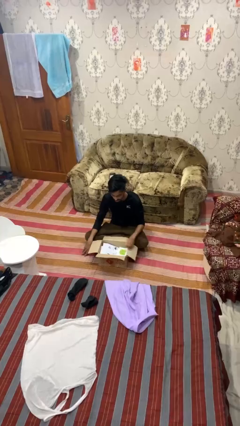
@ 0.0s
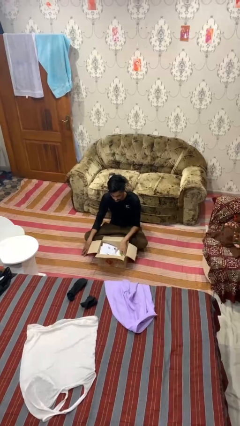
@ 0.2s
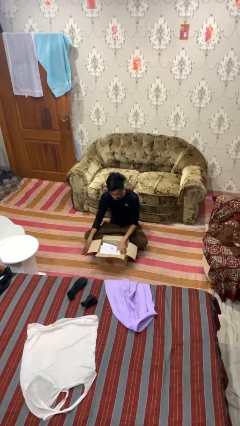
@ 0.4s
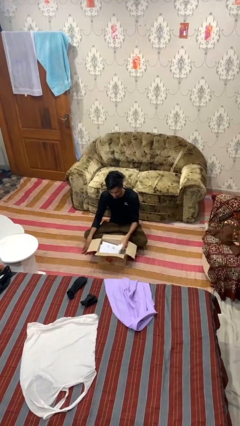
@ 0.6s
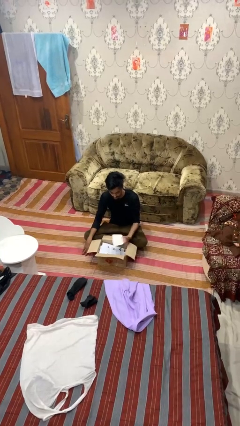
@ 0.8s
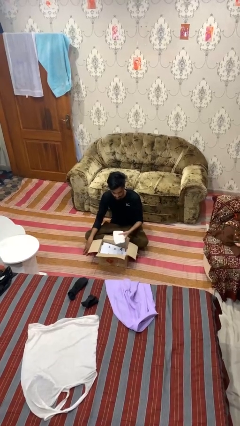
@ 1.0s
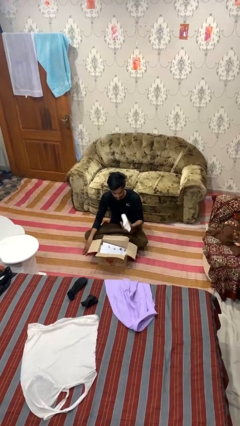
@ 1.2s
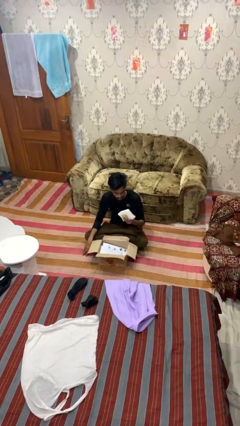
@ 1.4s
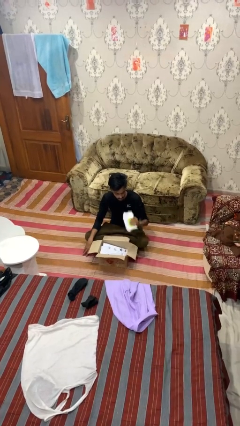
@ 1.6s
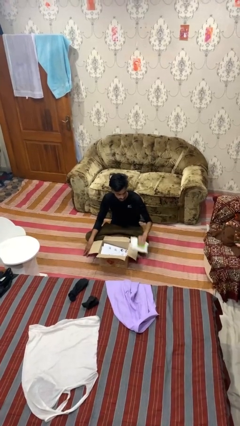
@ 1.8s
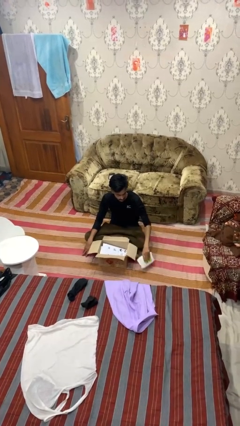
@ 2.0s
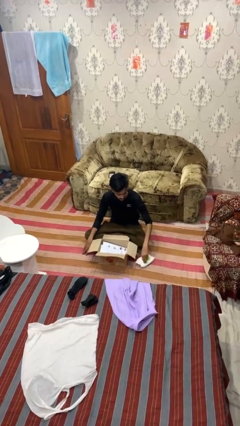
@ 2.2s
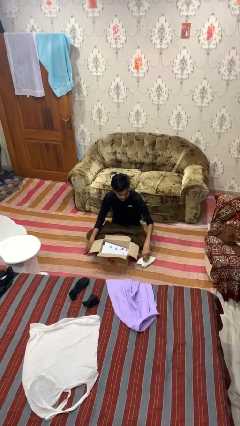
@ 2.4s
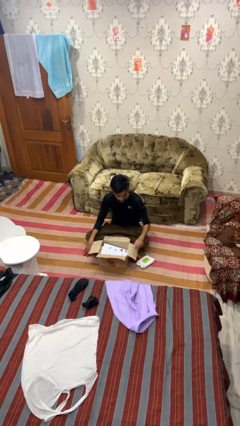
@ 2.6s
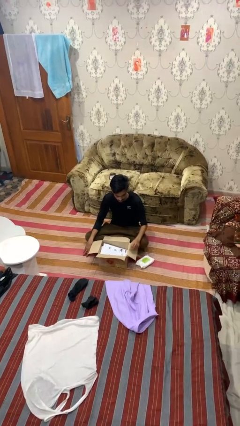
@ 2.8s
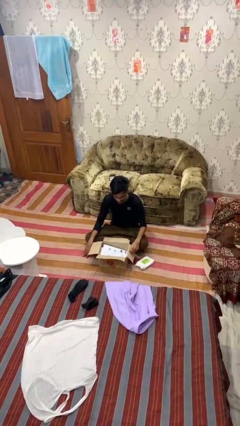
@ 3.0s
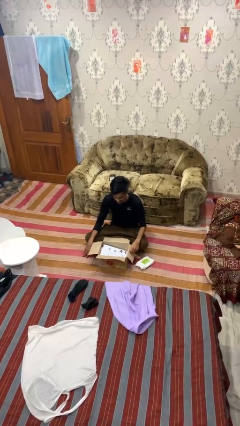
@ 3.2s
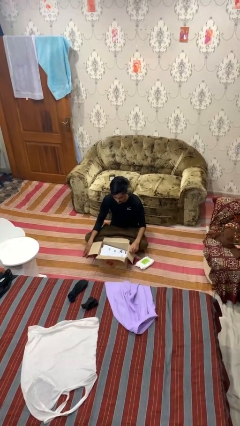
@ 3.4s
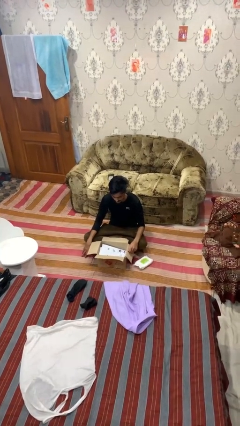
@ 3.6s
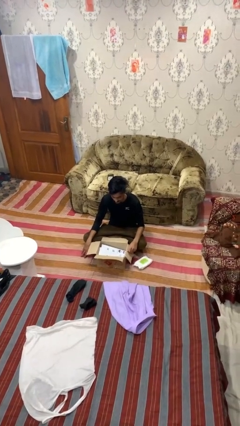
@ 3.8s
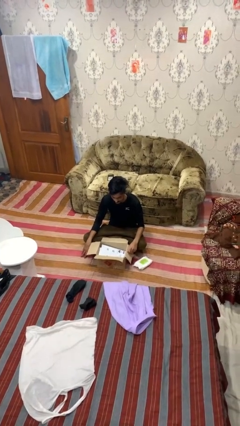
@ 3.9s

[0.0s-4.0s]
person takes object from box

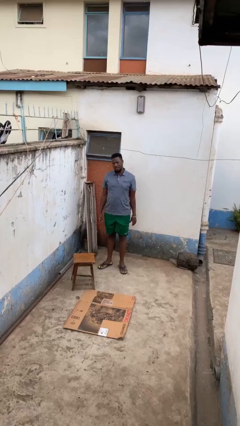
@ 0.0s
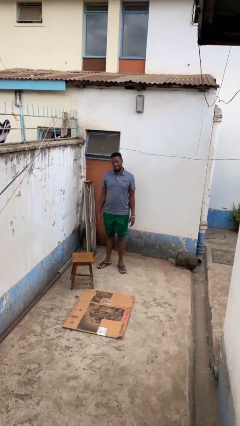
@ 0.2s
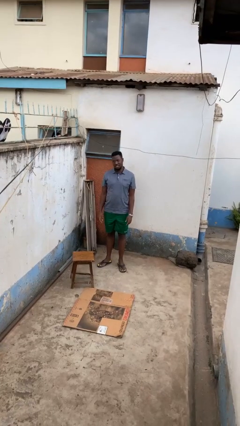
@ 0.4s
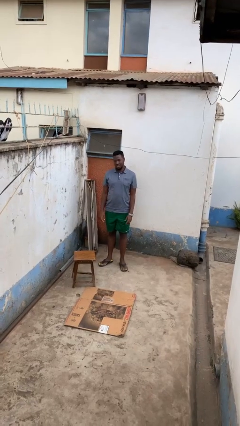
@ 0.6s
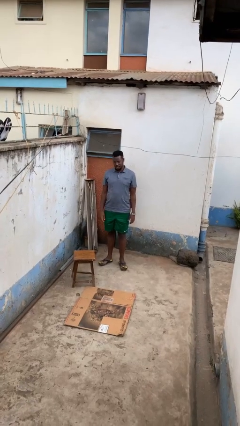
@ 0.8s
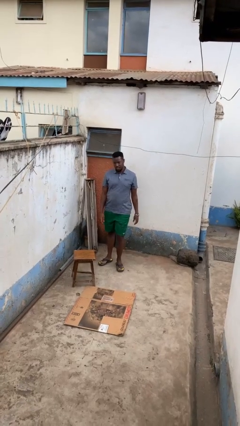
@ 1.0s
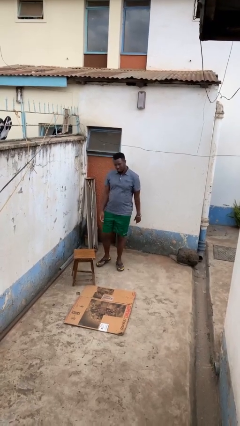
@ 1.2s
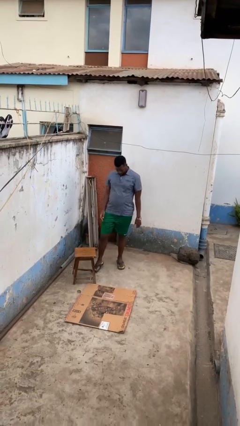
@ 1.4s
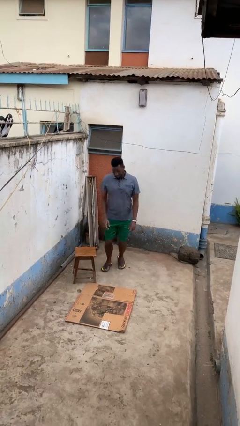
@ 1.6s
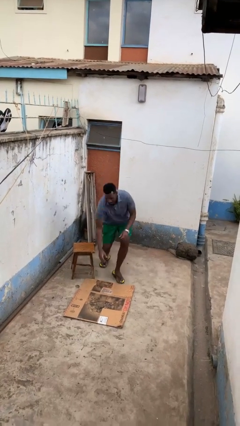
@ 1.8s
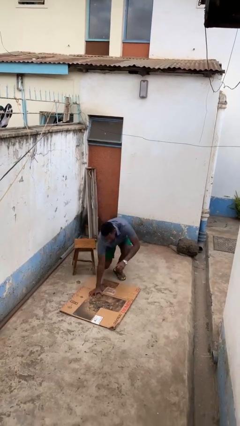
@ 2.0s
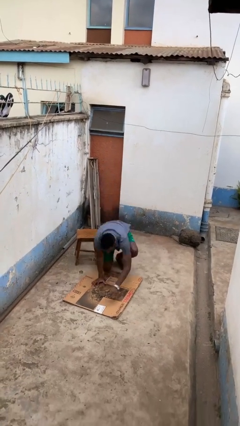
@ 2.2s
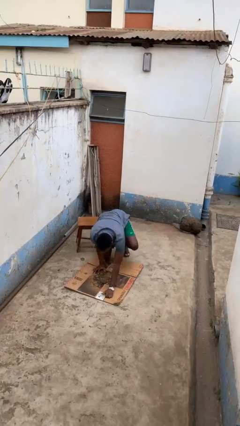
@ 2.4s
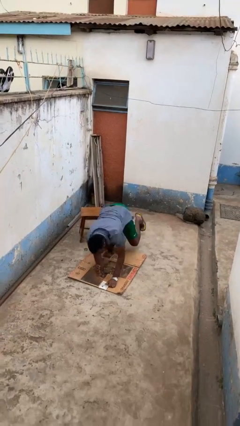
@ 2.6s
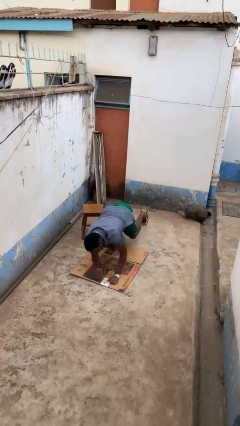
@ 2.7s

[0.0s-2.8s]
person trips on object on floor

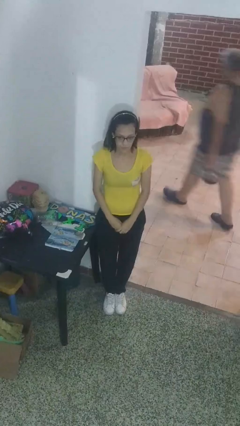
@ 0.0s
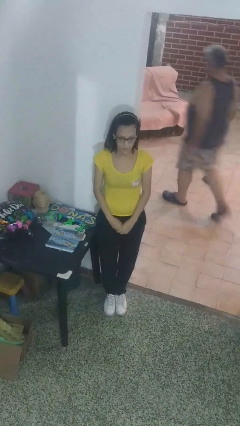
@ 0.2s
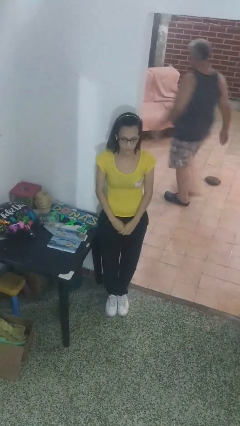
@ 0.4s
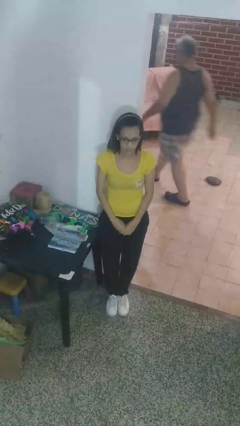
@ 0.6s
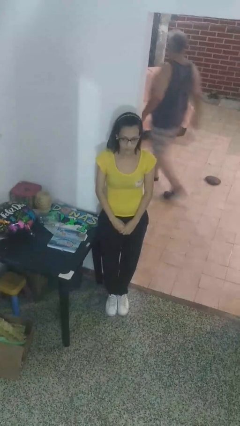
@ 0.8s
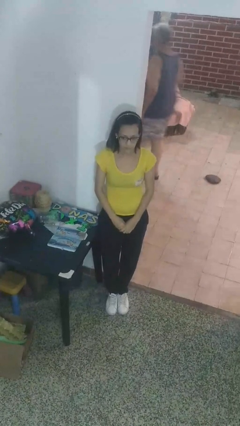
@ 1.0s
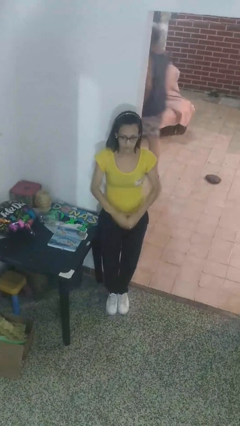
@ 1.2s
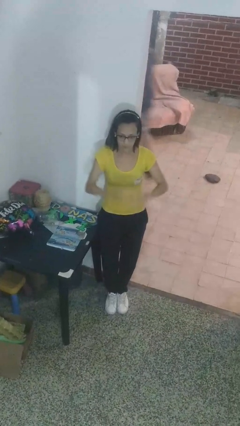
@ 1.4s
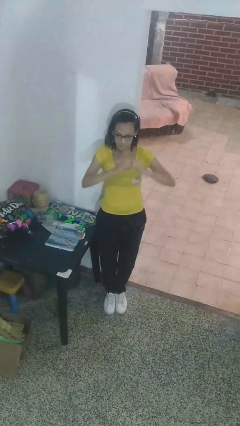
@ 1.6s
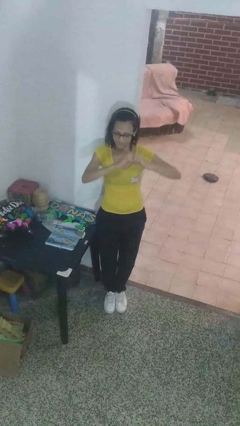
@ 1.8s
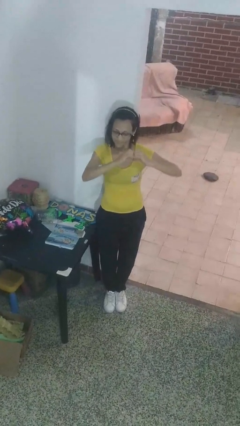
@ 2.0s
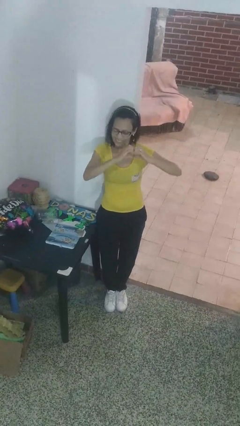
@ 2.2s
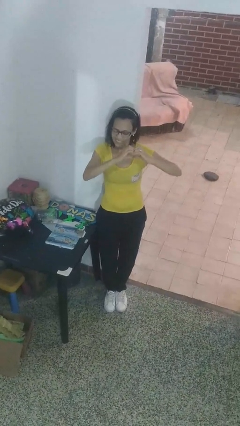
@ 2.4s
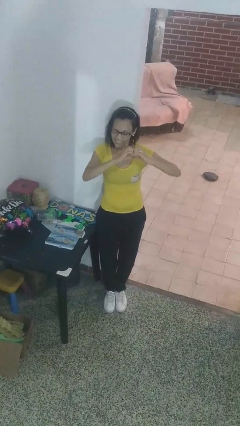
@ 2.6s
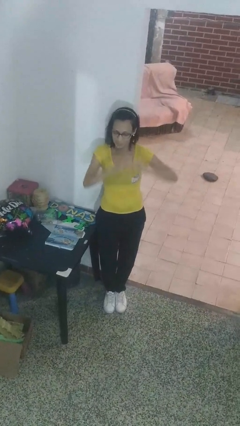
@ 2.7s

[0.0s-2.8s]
person gestures heart

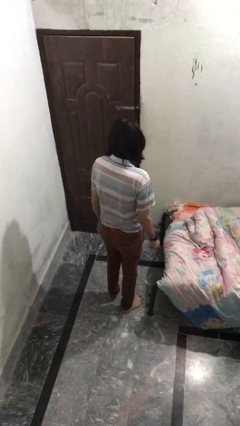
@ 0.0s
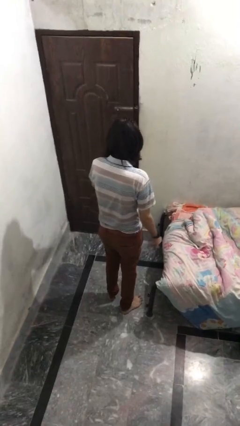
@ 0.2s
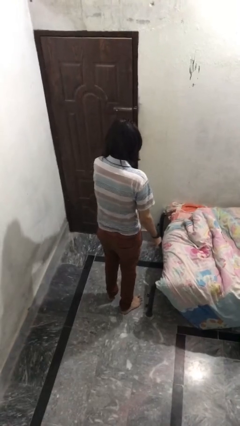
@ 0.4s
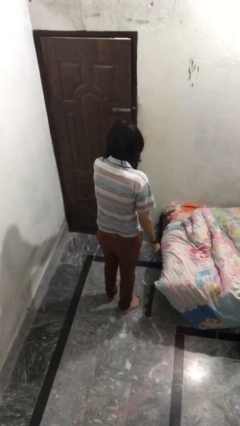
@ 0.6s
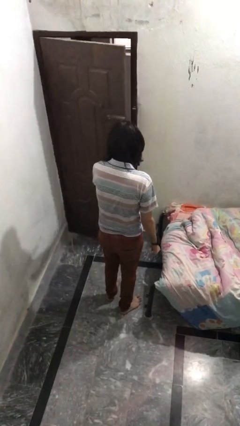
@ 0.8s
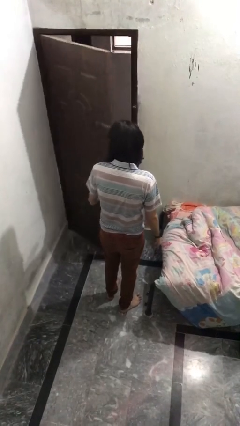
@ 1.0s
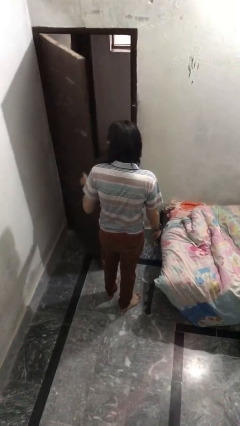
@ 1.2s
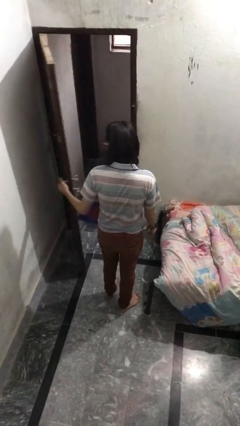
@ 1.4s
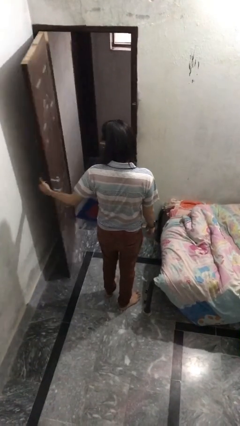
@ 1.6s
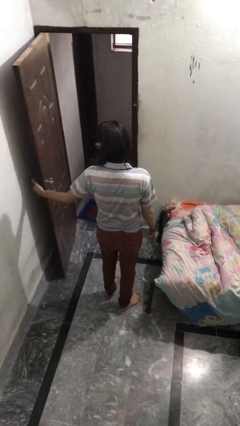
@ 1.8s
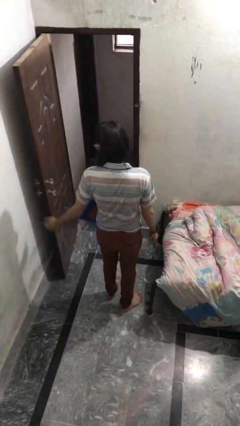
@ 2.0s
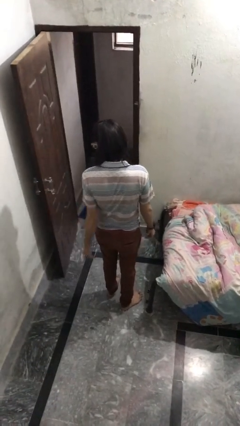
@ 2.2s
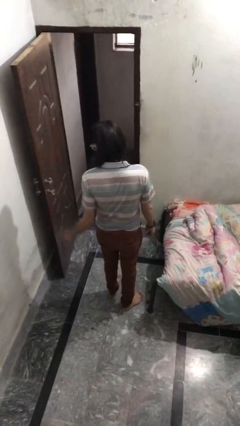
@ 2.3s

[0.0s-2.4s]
person opens facility door

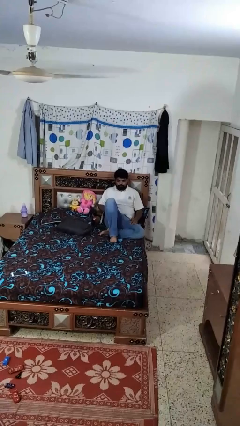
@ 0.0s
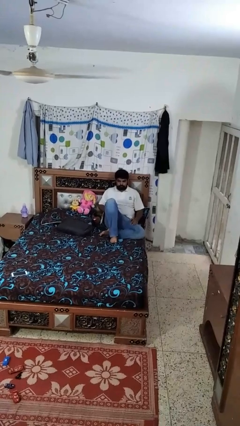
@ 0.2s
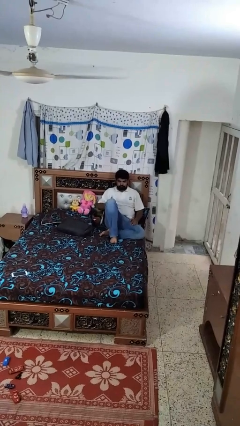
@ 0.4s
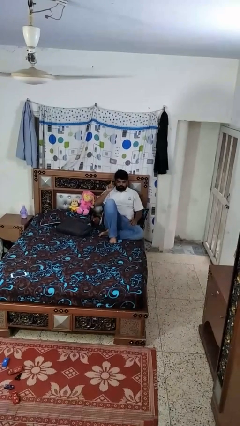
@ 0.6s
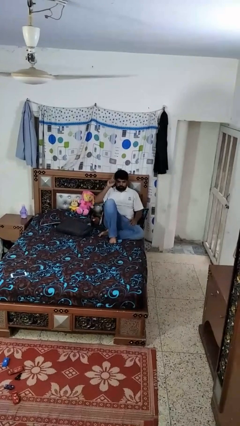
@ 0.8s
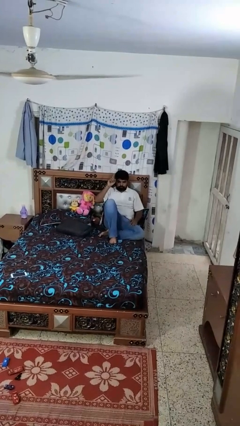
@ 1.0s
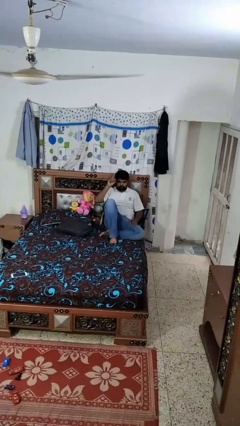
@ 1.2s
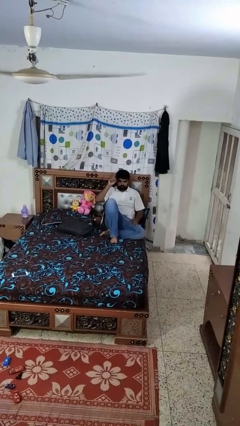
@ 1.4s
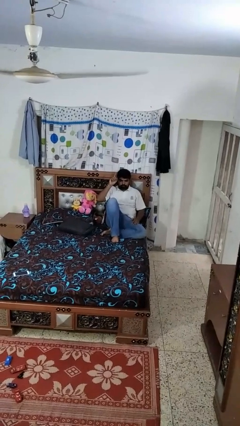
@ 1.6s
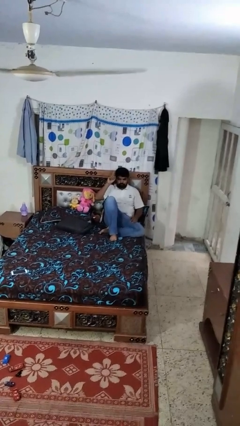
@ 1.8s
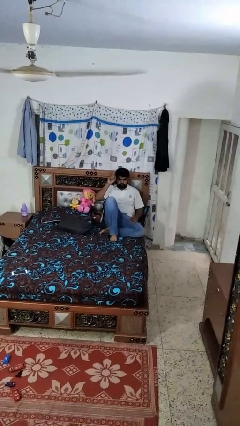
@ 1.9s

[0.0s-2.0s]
person gestures raise hand

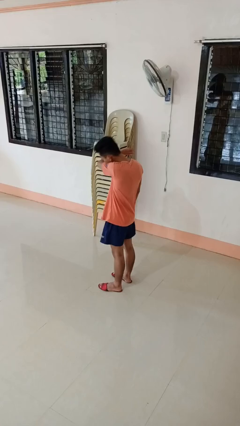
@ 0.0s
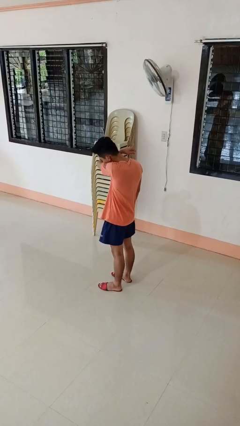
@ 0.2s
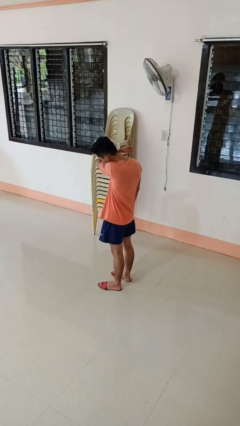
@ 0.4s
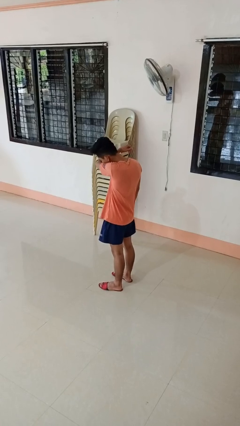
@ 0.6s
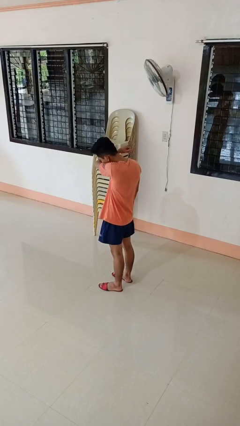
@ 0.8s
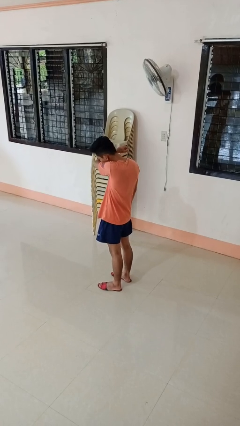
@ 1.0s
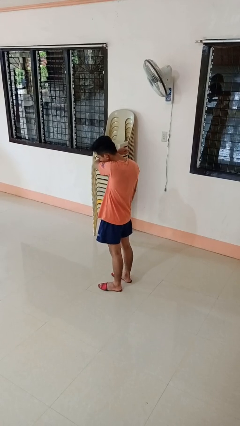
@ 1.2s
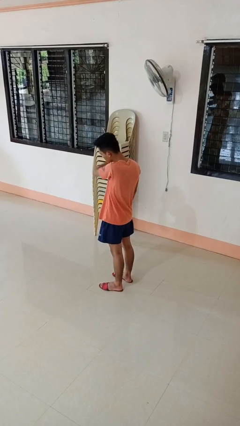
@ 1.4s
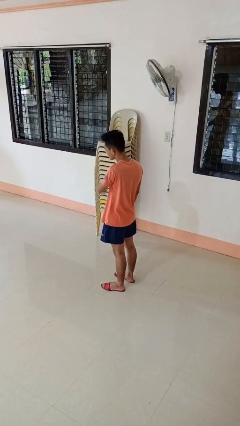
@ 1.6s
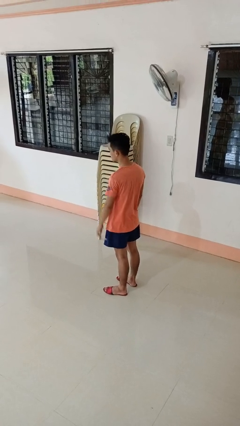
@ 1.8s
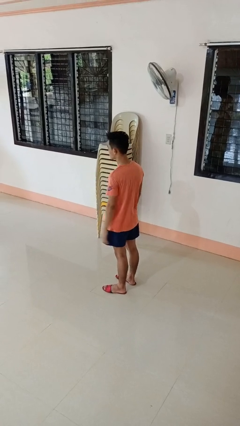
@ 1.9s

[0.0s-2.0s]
person sneezes into arm

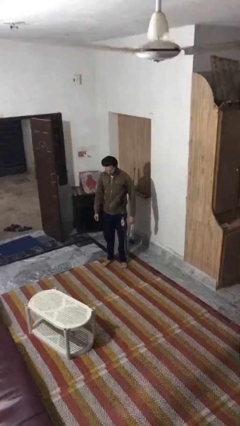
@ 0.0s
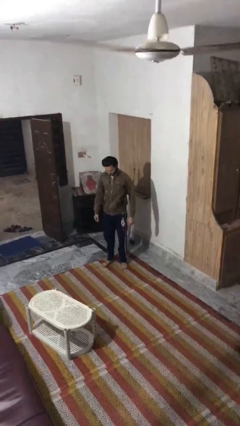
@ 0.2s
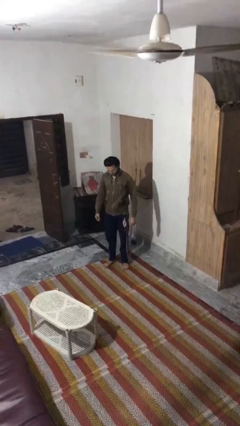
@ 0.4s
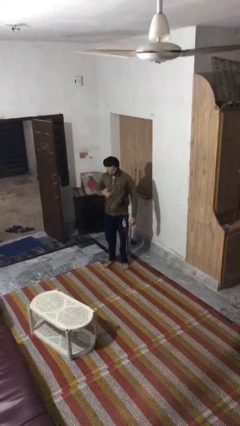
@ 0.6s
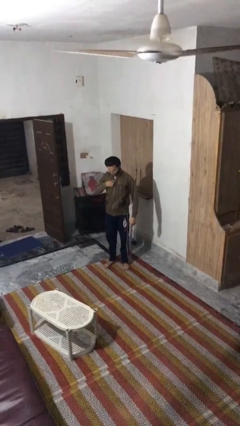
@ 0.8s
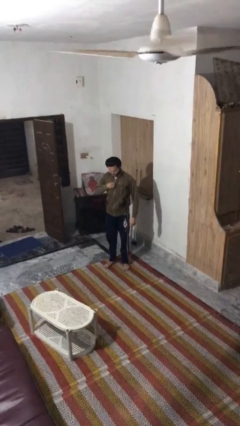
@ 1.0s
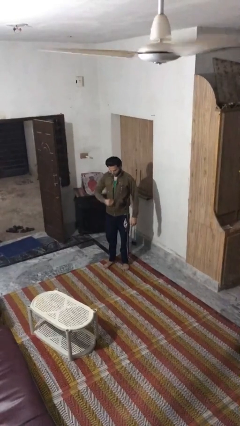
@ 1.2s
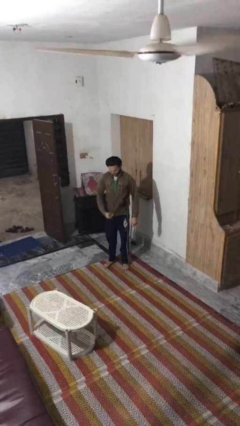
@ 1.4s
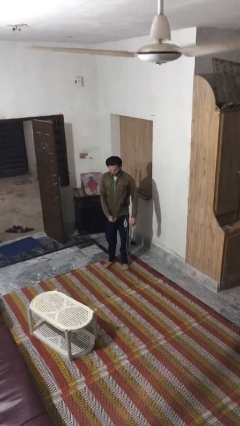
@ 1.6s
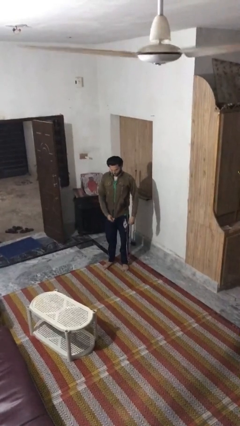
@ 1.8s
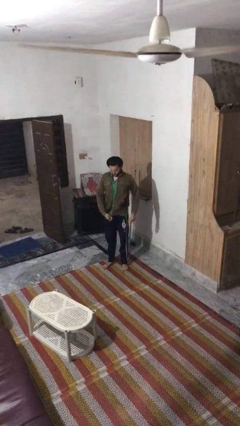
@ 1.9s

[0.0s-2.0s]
person unzips jacket
